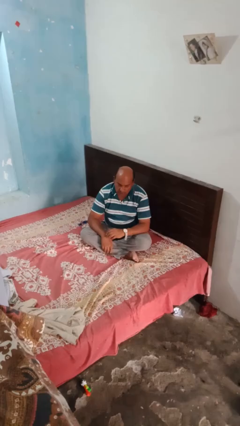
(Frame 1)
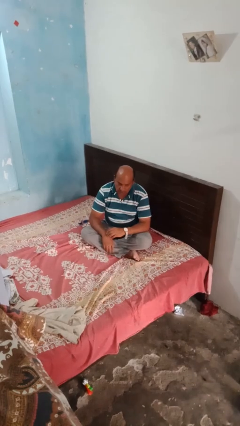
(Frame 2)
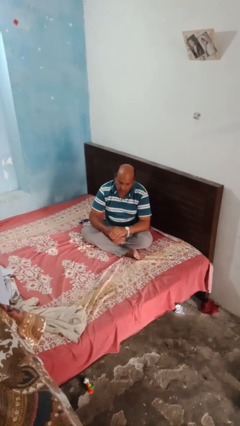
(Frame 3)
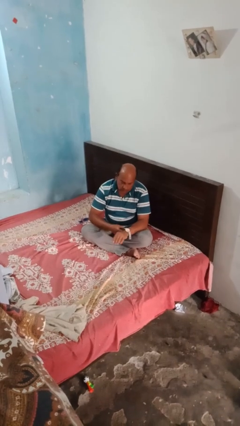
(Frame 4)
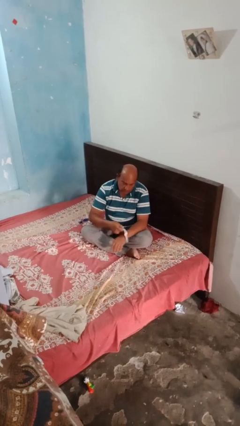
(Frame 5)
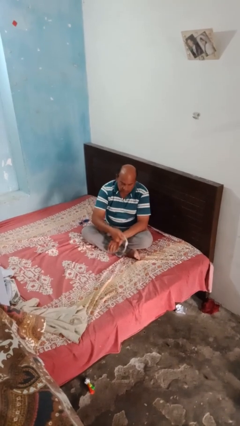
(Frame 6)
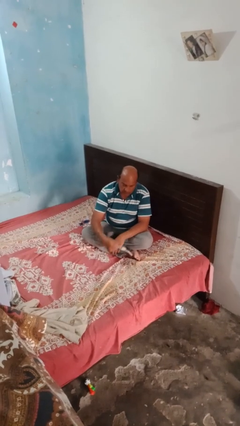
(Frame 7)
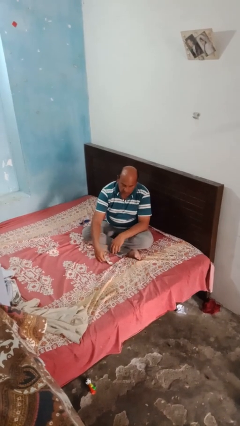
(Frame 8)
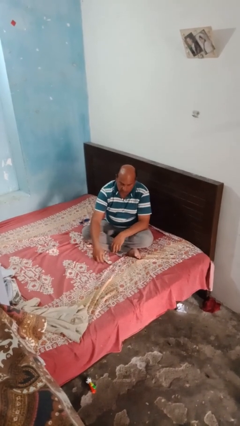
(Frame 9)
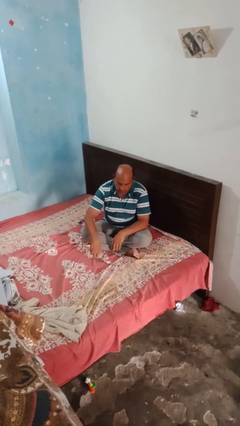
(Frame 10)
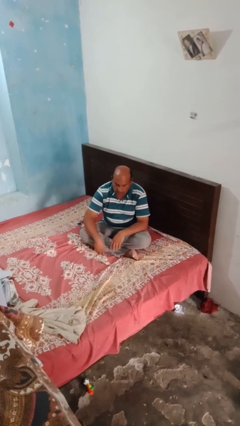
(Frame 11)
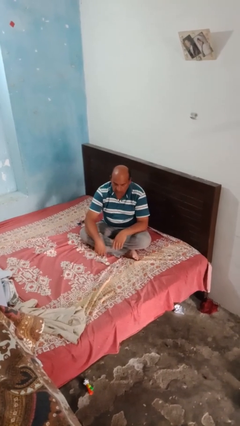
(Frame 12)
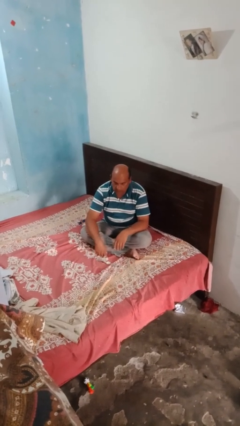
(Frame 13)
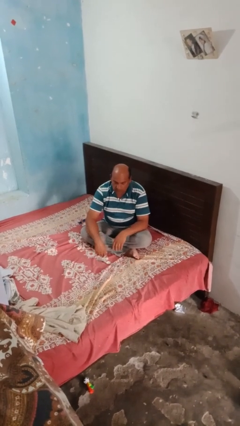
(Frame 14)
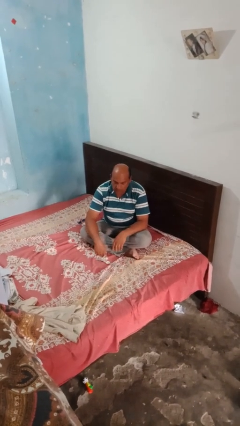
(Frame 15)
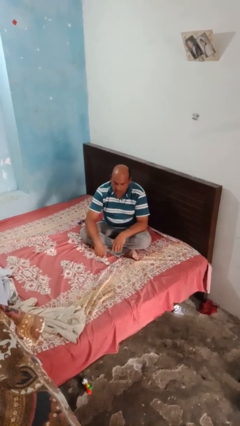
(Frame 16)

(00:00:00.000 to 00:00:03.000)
person takes off wristwatch

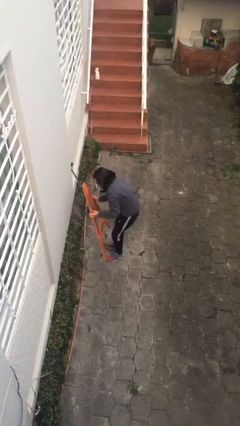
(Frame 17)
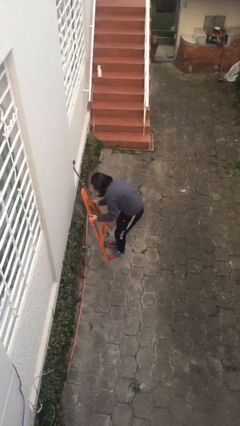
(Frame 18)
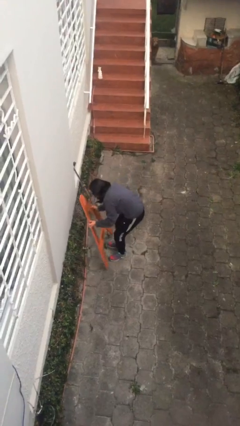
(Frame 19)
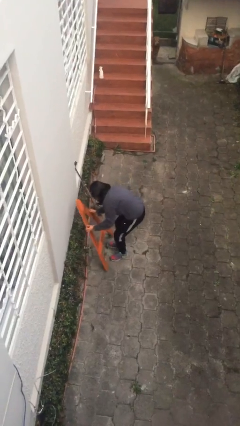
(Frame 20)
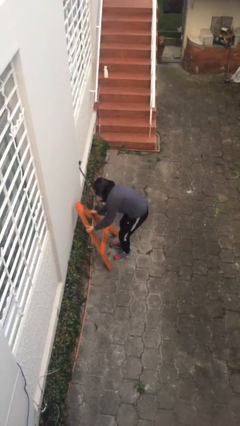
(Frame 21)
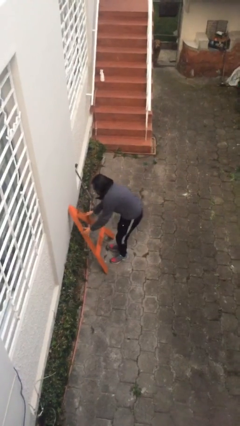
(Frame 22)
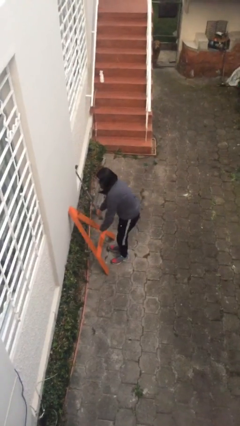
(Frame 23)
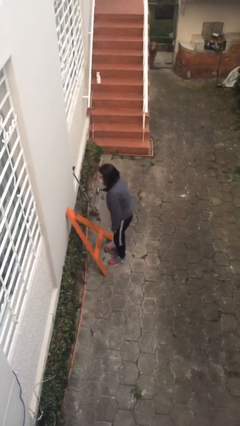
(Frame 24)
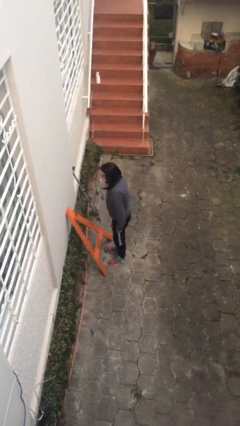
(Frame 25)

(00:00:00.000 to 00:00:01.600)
person puts down object on floor

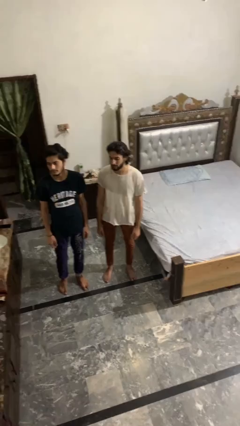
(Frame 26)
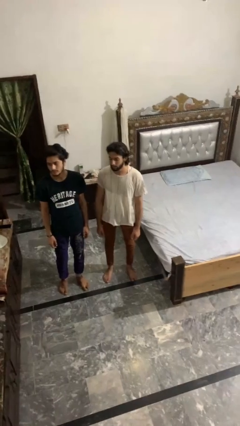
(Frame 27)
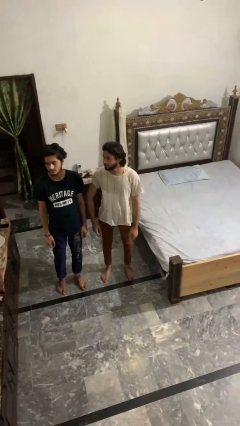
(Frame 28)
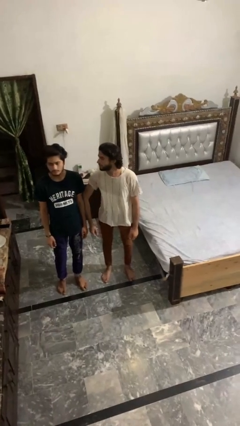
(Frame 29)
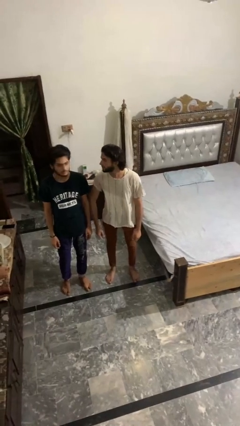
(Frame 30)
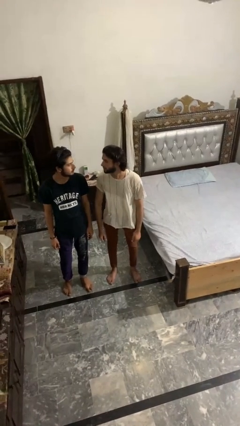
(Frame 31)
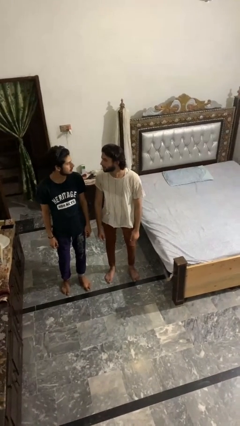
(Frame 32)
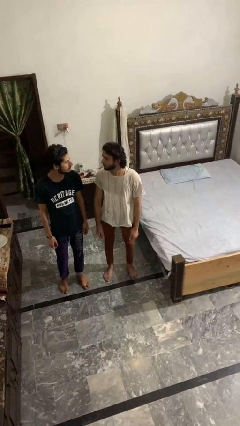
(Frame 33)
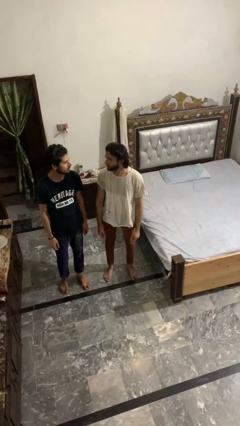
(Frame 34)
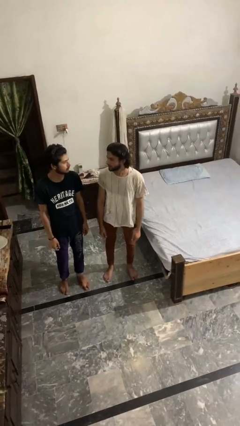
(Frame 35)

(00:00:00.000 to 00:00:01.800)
person nudges person with elbow

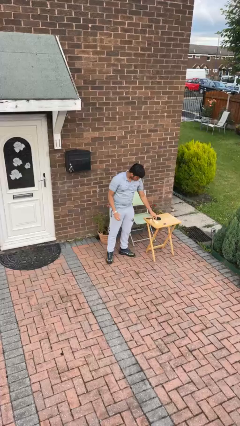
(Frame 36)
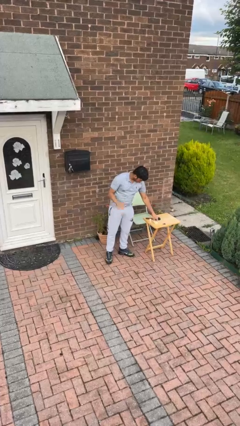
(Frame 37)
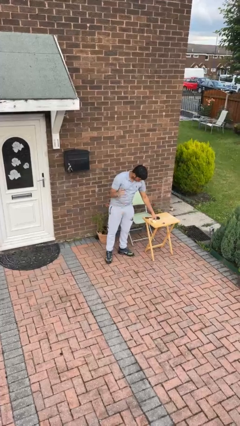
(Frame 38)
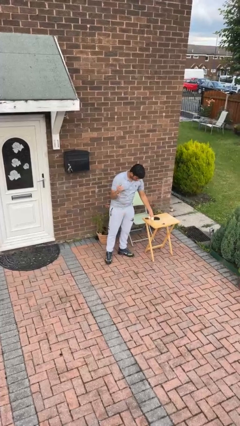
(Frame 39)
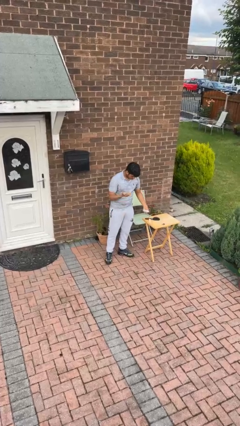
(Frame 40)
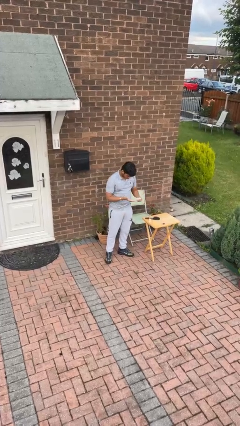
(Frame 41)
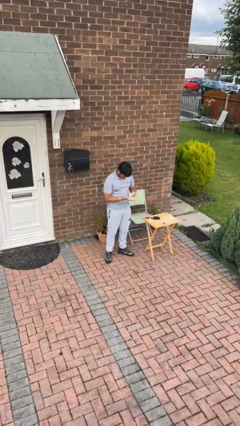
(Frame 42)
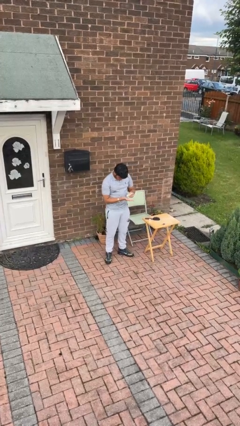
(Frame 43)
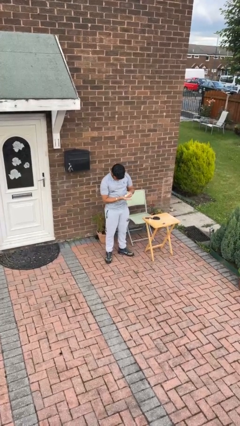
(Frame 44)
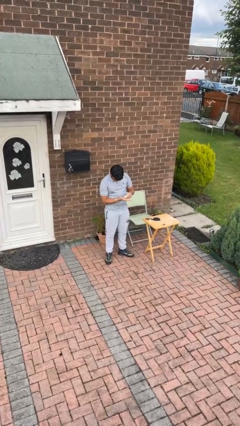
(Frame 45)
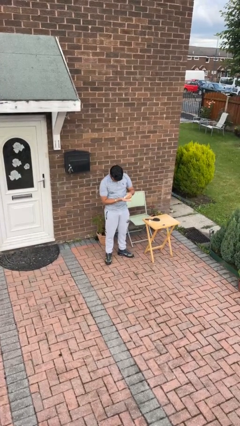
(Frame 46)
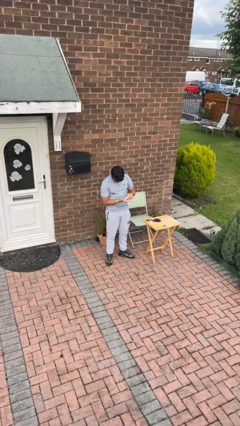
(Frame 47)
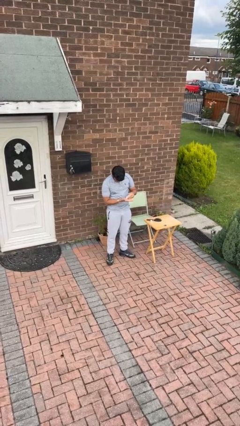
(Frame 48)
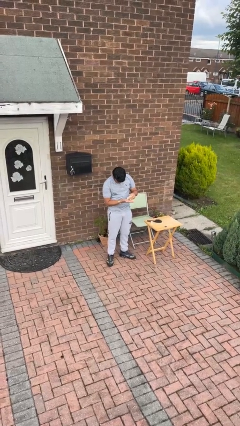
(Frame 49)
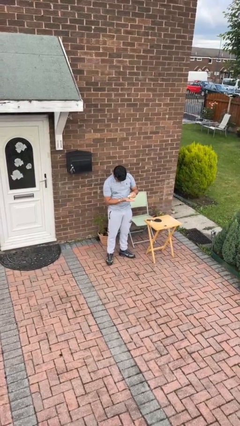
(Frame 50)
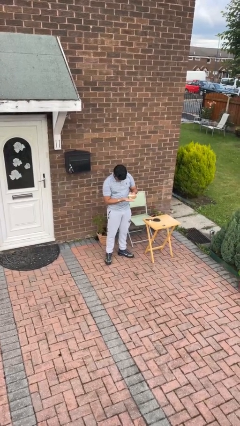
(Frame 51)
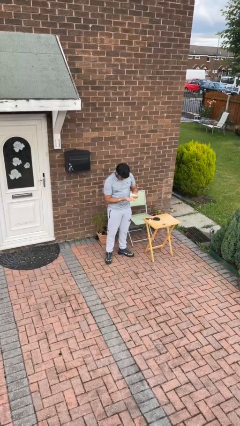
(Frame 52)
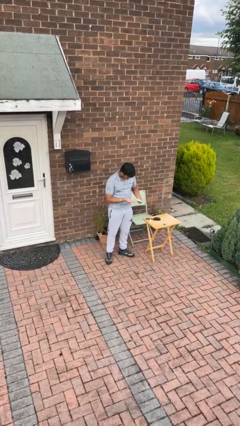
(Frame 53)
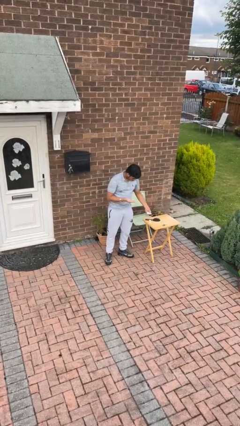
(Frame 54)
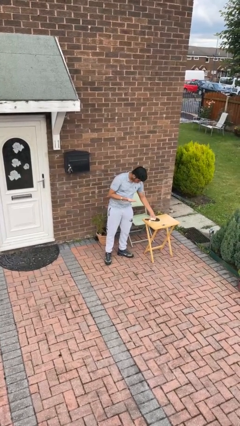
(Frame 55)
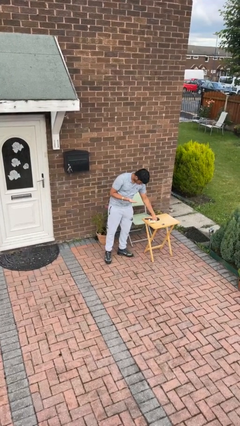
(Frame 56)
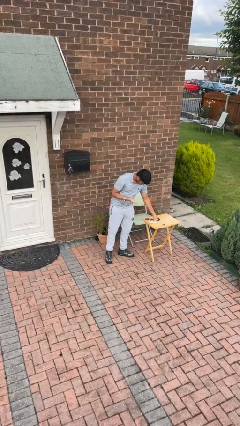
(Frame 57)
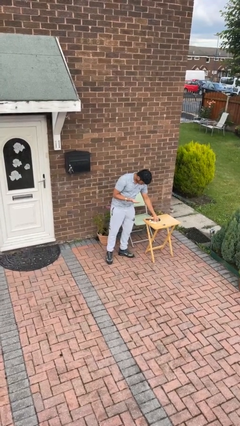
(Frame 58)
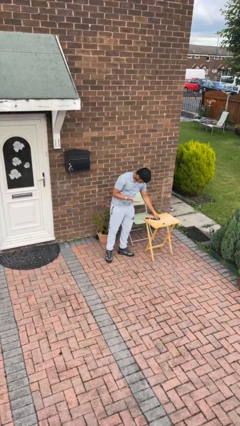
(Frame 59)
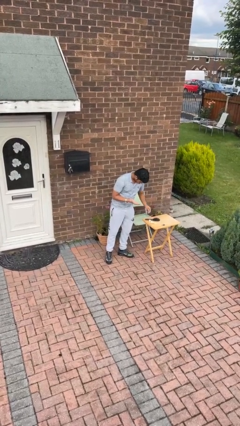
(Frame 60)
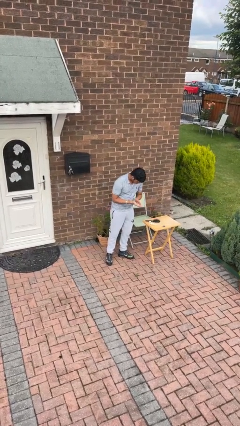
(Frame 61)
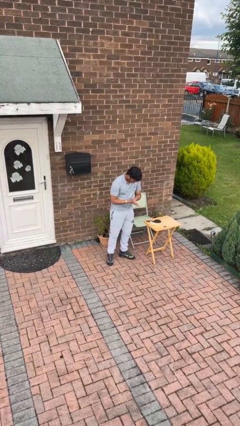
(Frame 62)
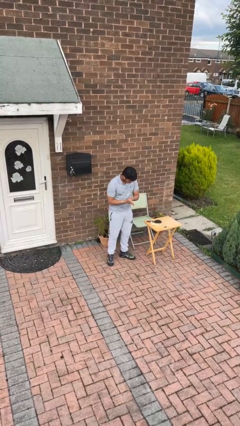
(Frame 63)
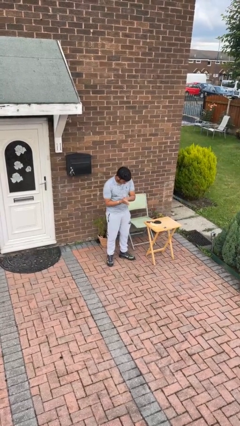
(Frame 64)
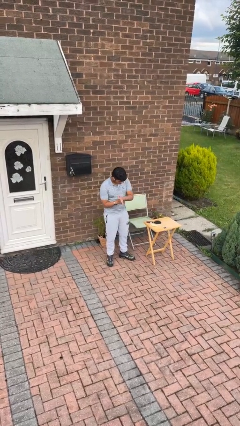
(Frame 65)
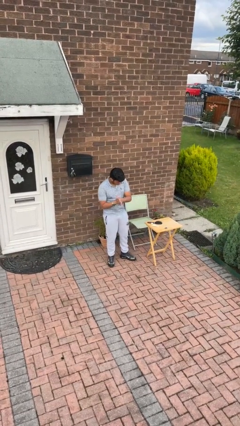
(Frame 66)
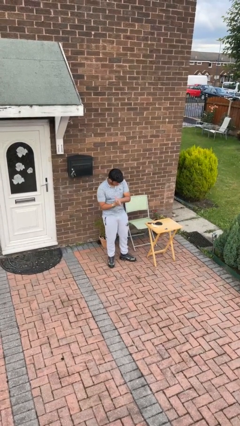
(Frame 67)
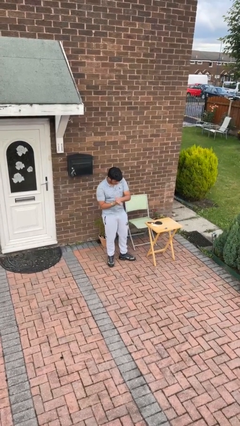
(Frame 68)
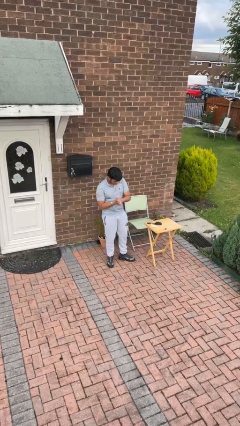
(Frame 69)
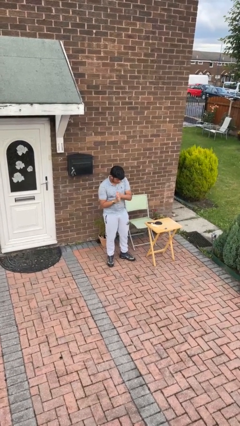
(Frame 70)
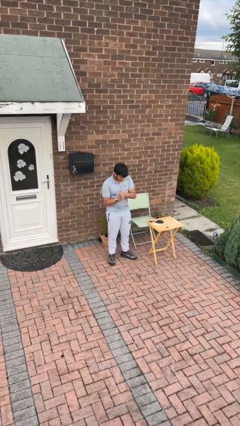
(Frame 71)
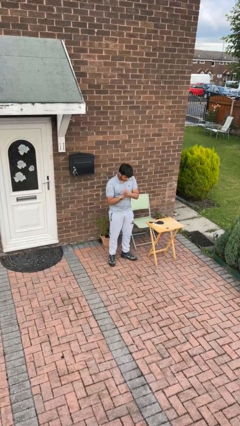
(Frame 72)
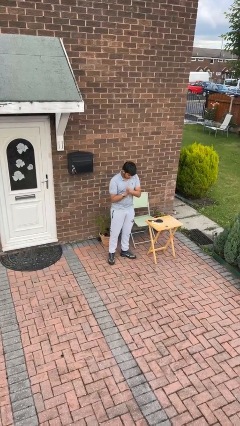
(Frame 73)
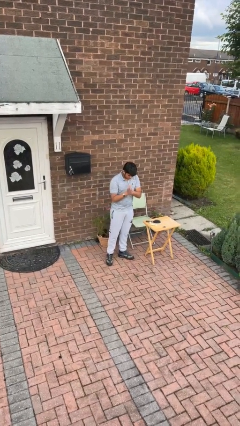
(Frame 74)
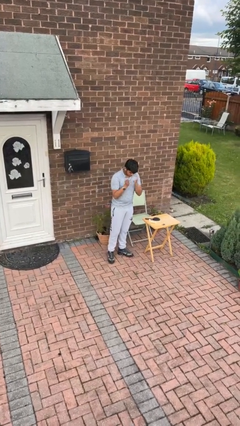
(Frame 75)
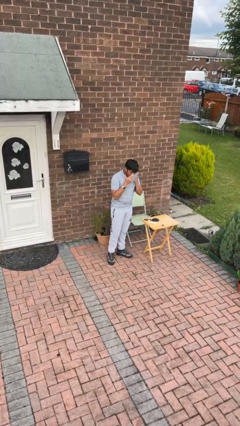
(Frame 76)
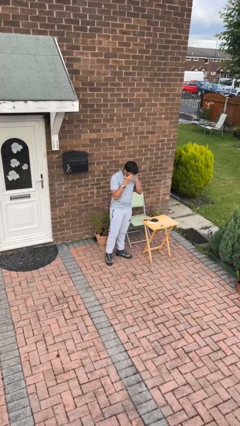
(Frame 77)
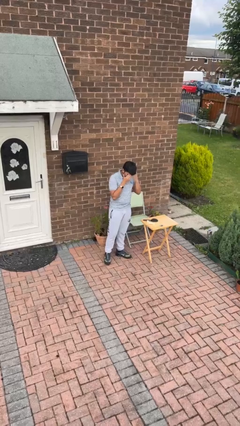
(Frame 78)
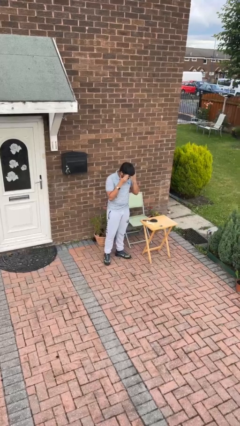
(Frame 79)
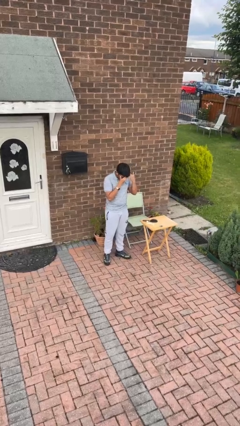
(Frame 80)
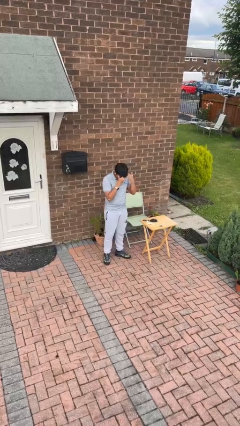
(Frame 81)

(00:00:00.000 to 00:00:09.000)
person applies facial moisturizer

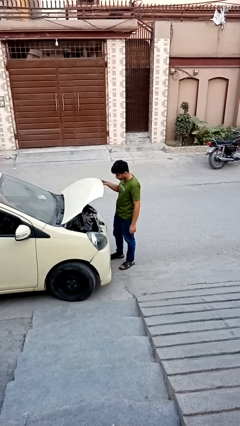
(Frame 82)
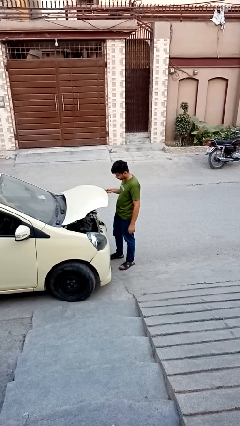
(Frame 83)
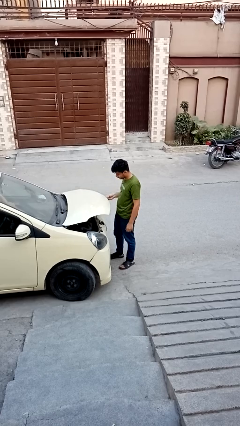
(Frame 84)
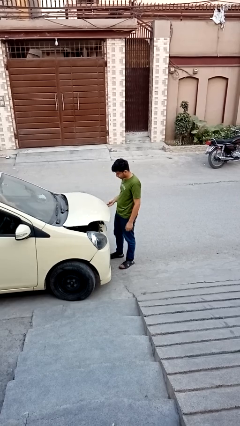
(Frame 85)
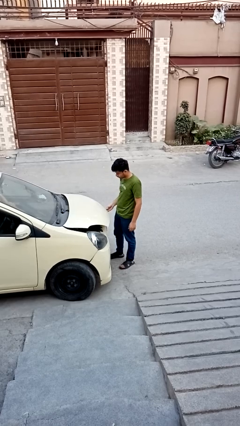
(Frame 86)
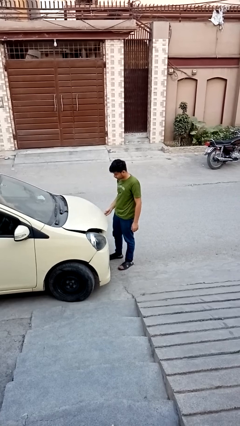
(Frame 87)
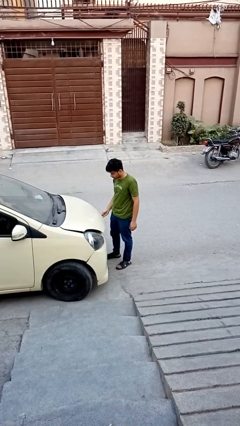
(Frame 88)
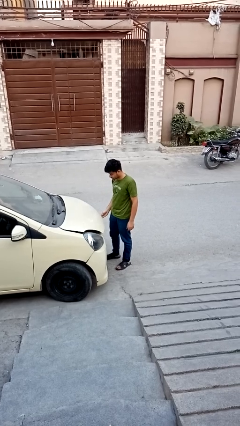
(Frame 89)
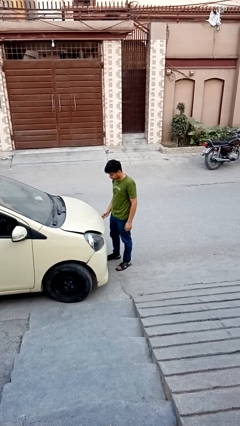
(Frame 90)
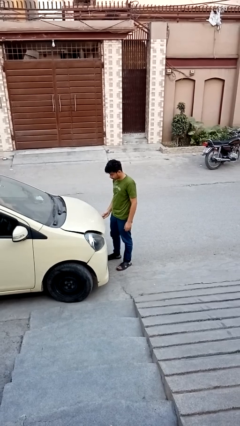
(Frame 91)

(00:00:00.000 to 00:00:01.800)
person closes car hood

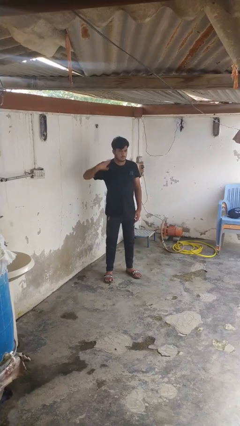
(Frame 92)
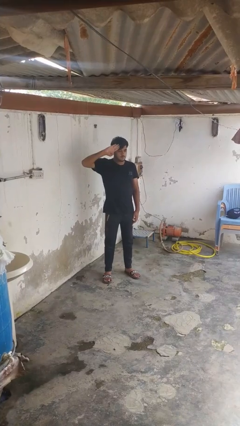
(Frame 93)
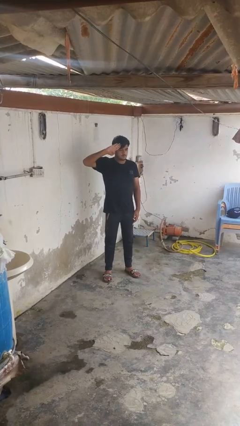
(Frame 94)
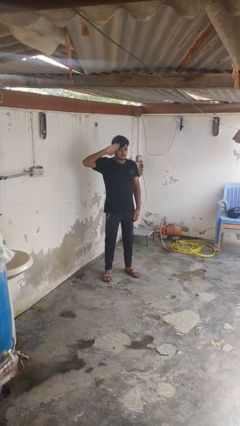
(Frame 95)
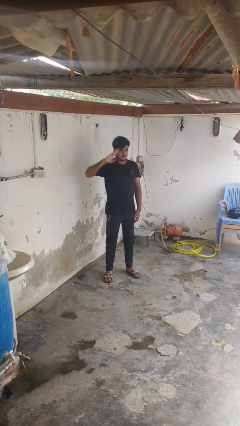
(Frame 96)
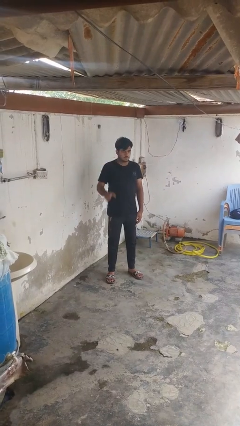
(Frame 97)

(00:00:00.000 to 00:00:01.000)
person salutes
